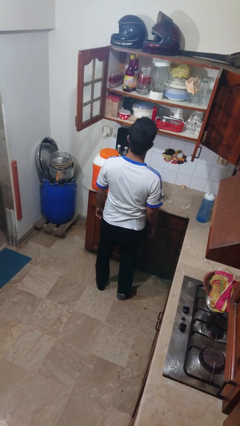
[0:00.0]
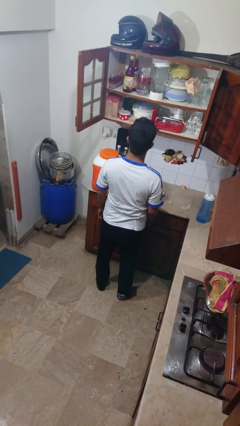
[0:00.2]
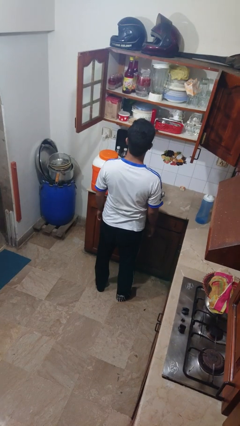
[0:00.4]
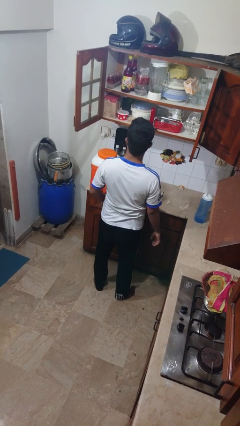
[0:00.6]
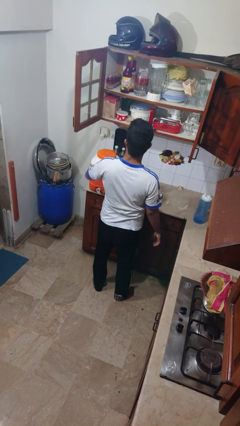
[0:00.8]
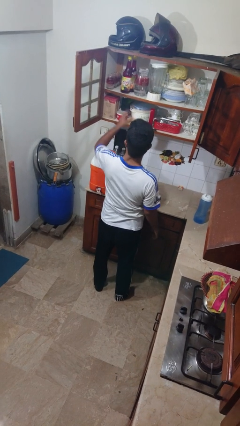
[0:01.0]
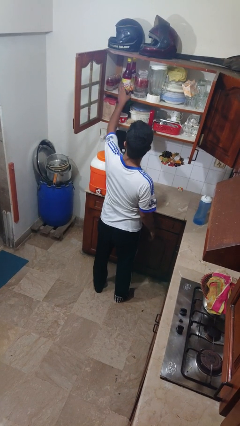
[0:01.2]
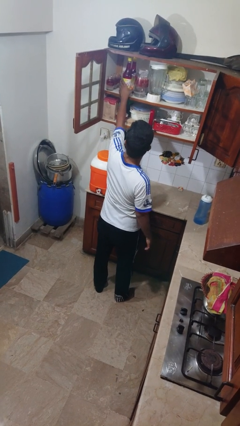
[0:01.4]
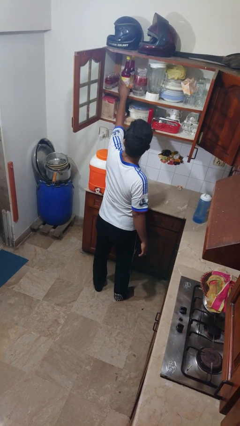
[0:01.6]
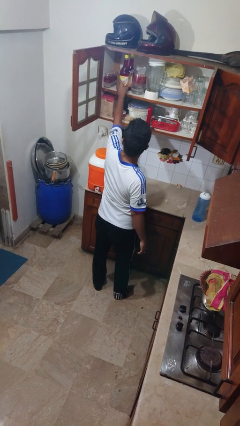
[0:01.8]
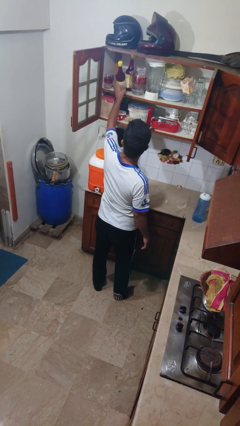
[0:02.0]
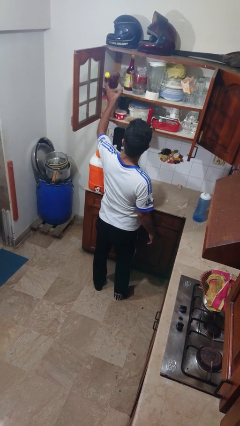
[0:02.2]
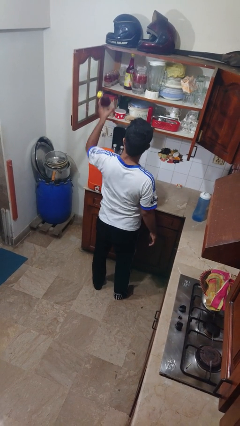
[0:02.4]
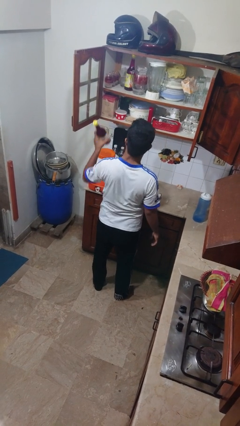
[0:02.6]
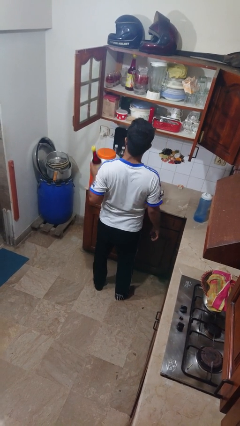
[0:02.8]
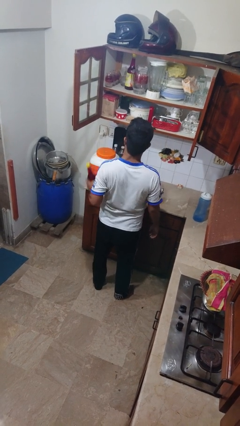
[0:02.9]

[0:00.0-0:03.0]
person picks up object from cabinet

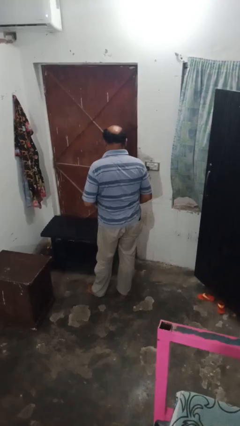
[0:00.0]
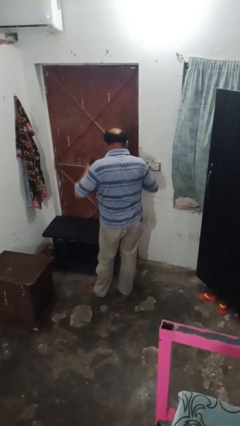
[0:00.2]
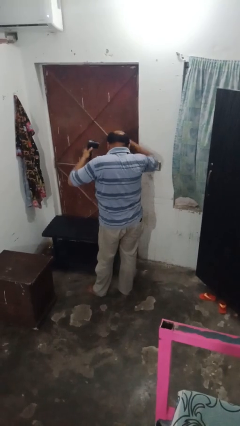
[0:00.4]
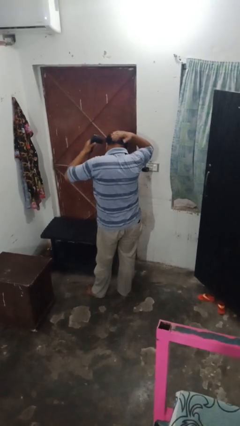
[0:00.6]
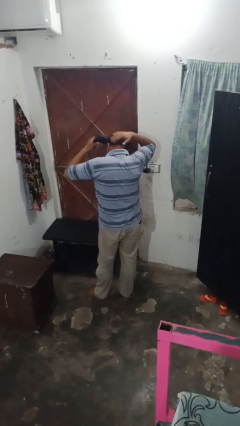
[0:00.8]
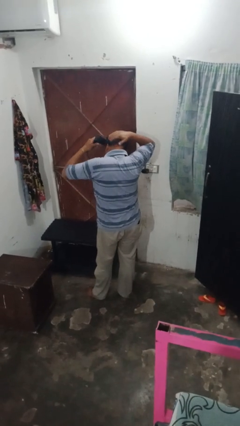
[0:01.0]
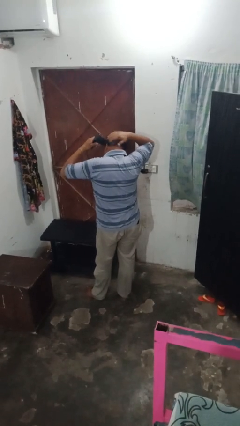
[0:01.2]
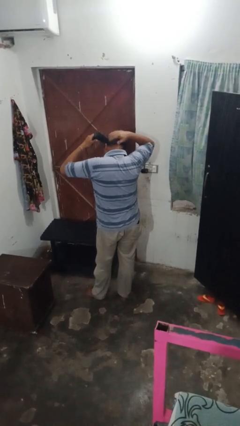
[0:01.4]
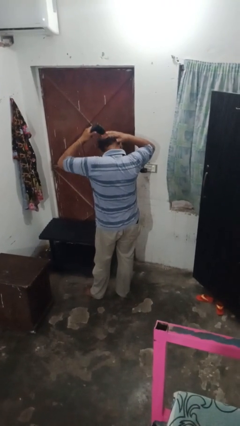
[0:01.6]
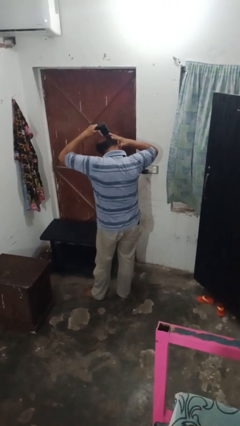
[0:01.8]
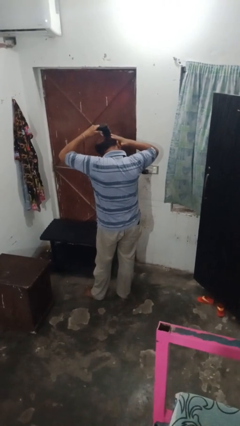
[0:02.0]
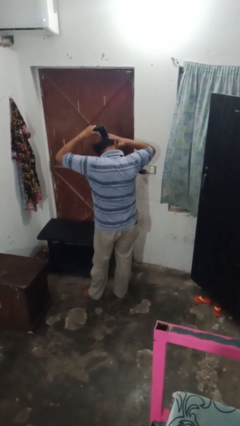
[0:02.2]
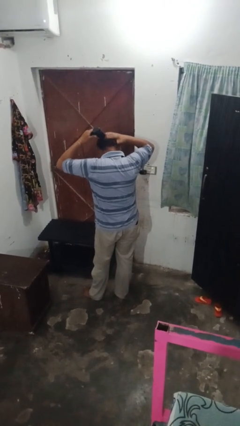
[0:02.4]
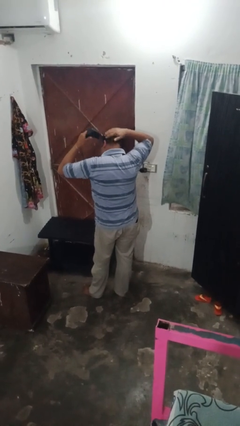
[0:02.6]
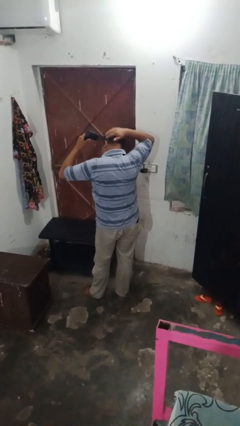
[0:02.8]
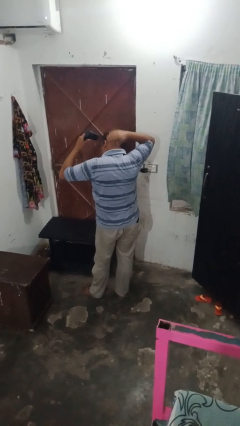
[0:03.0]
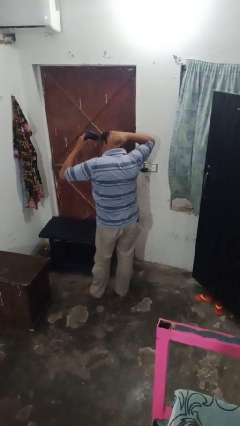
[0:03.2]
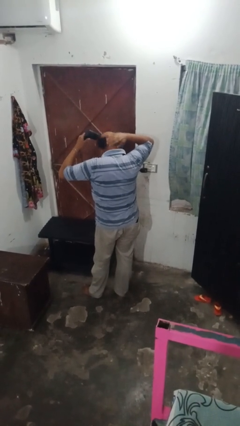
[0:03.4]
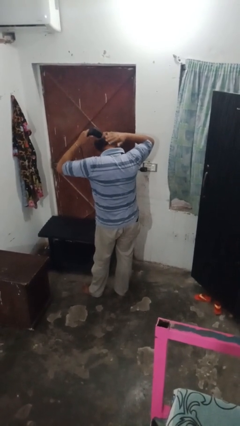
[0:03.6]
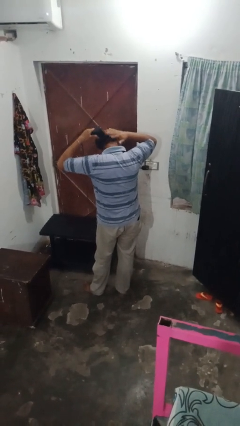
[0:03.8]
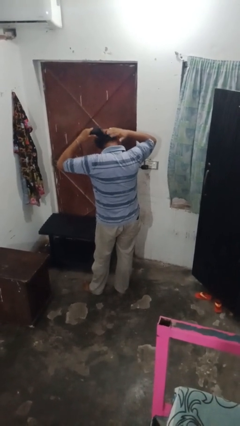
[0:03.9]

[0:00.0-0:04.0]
person dries hair with hairdryer

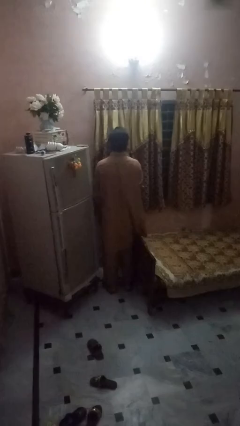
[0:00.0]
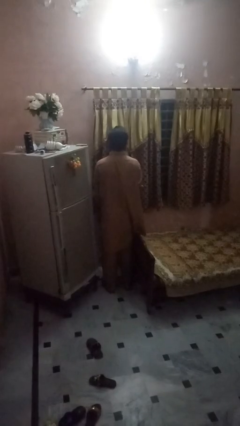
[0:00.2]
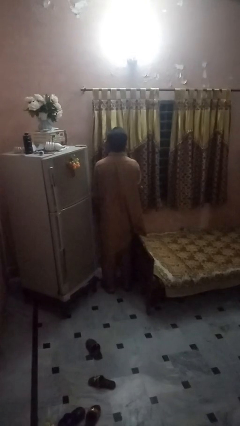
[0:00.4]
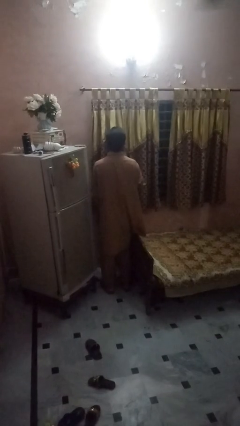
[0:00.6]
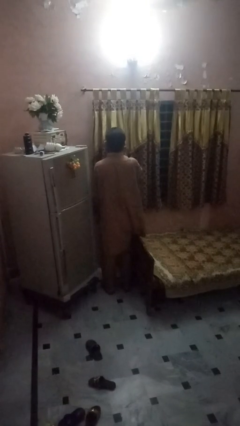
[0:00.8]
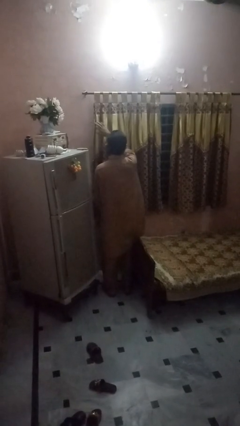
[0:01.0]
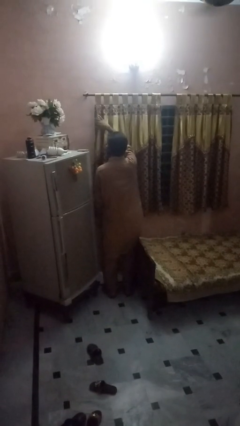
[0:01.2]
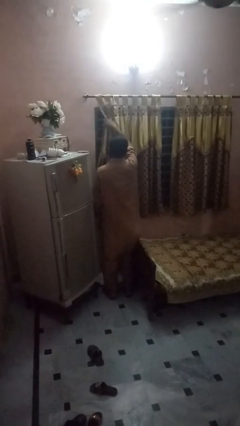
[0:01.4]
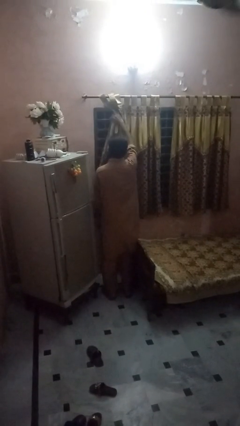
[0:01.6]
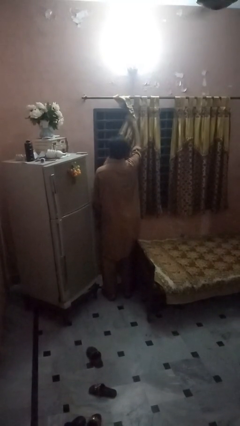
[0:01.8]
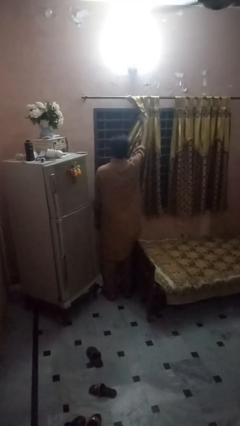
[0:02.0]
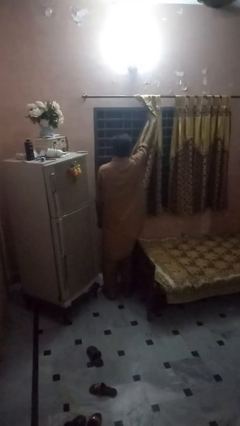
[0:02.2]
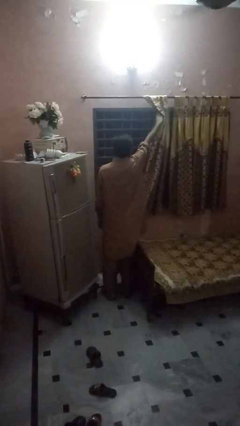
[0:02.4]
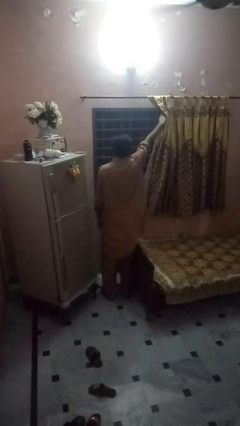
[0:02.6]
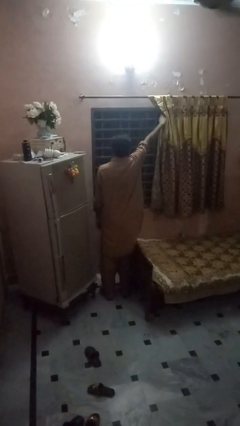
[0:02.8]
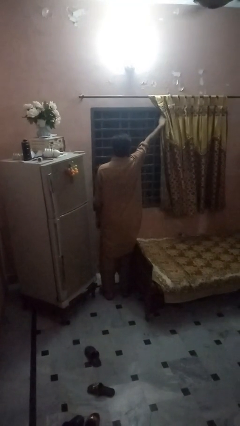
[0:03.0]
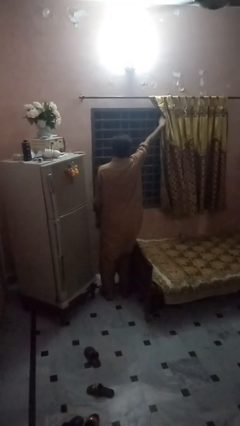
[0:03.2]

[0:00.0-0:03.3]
person opens curtains

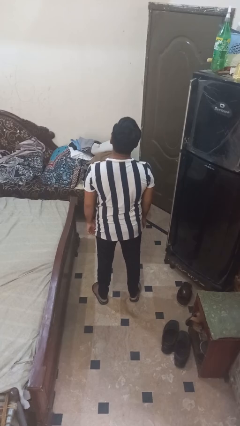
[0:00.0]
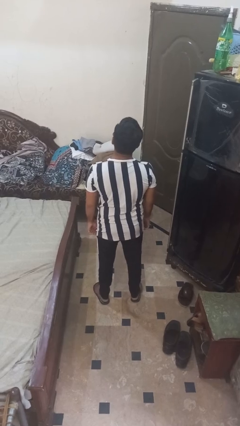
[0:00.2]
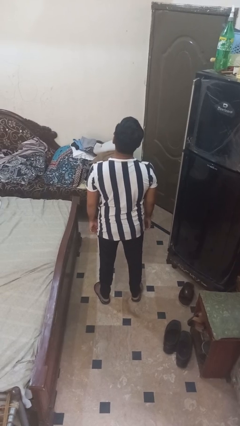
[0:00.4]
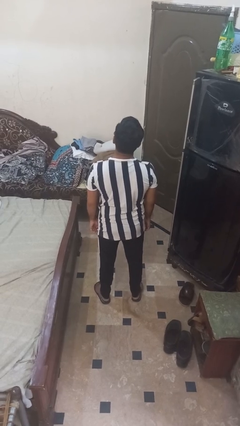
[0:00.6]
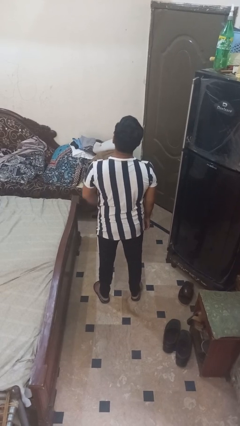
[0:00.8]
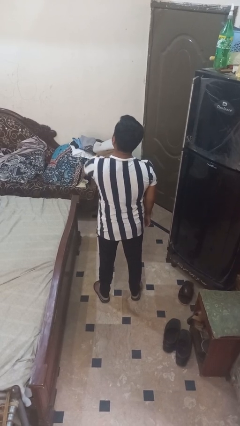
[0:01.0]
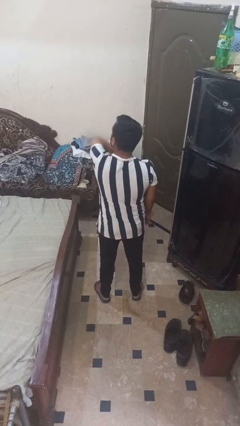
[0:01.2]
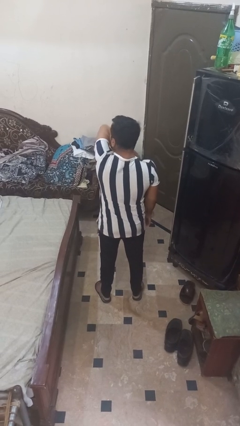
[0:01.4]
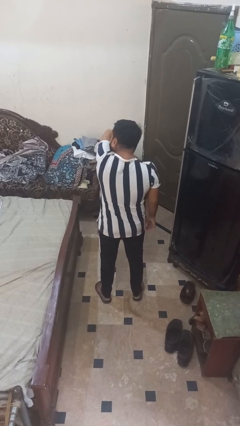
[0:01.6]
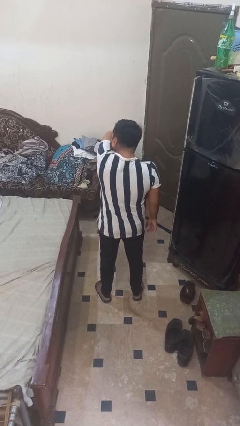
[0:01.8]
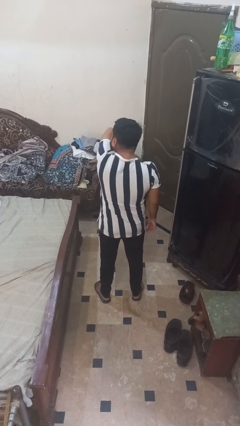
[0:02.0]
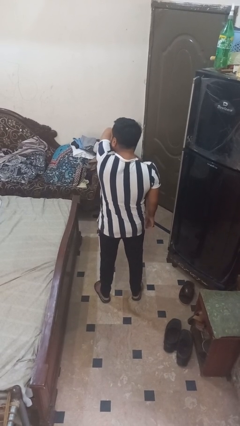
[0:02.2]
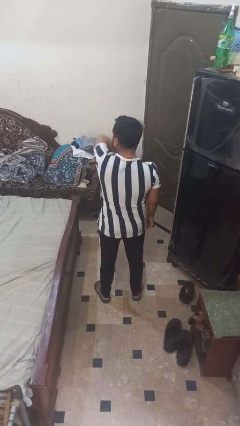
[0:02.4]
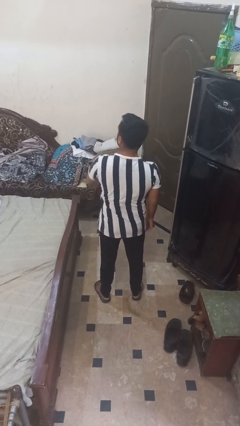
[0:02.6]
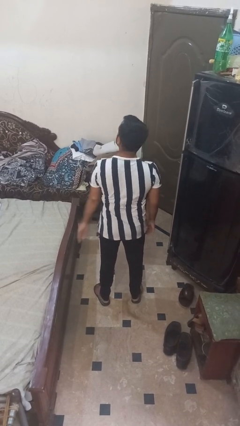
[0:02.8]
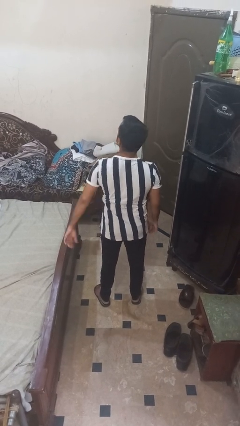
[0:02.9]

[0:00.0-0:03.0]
person sneezes into arm

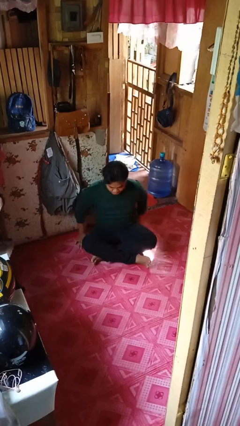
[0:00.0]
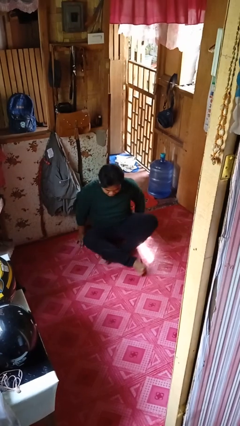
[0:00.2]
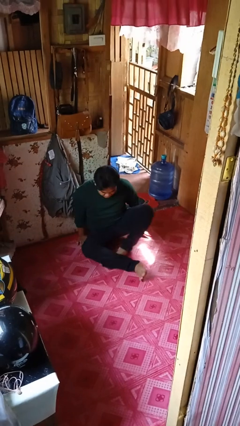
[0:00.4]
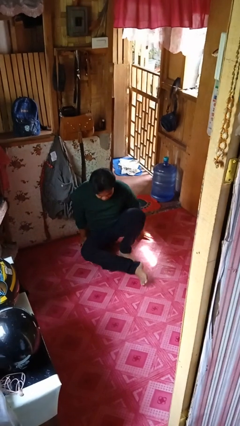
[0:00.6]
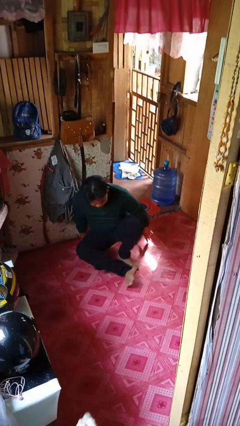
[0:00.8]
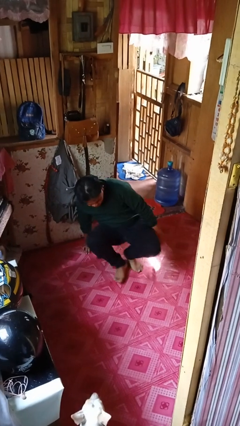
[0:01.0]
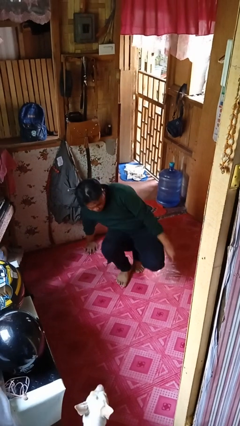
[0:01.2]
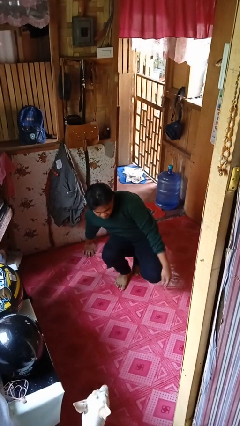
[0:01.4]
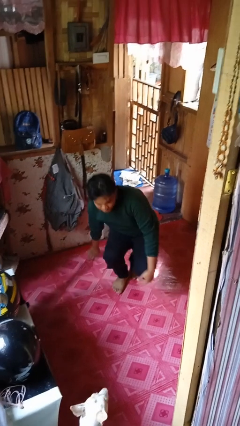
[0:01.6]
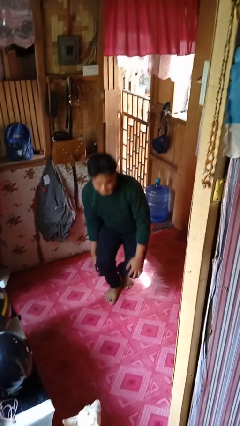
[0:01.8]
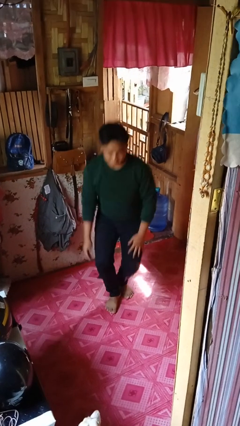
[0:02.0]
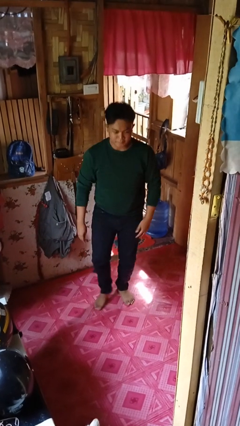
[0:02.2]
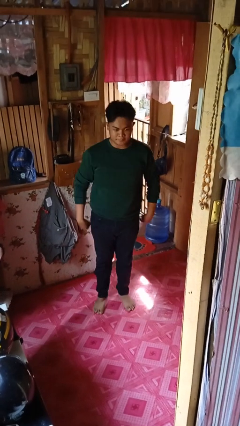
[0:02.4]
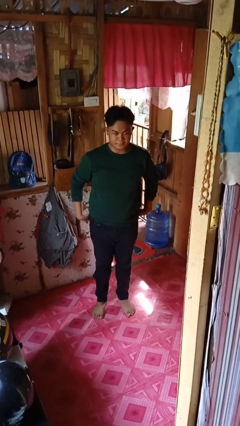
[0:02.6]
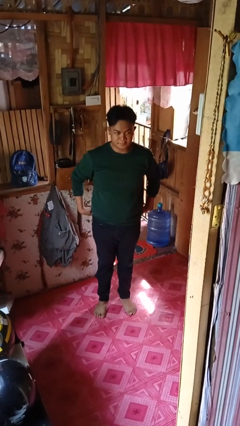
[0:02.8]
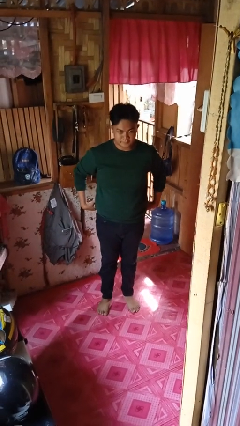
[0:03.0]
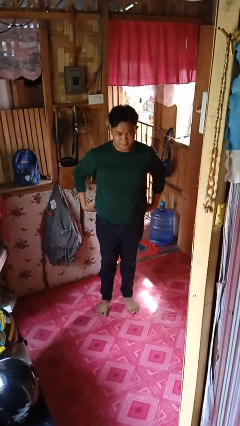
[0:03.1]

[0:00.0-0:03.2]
person stands up from floor

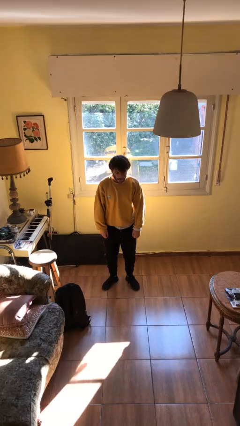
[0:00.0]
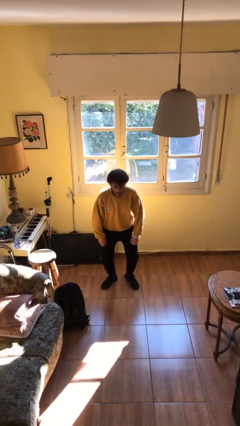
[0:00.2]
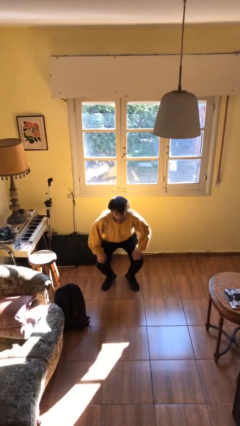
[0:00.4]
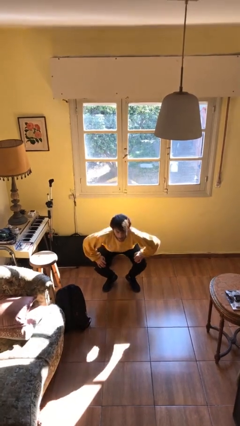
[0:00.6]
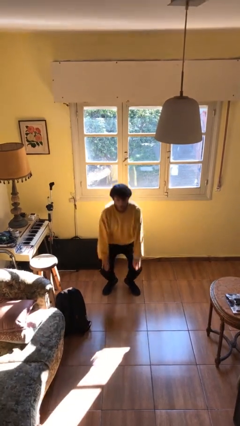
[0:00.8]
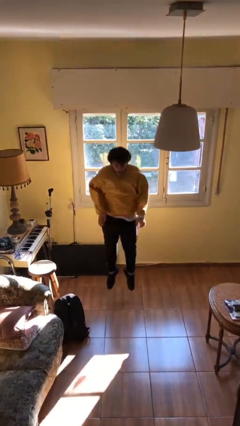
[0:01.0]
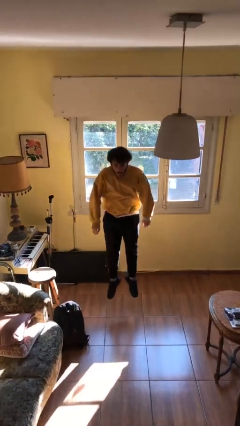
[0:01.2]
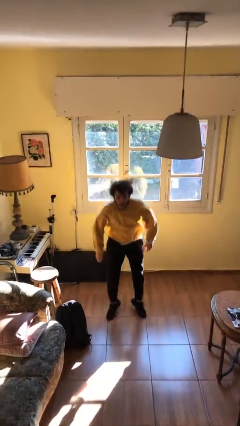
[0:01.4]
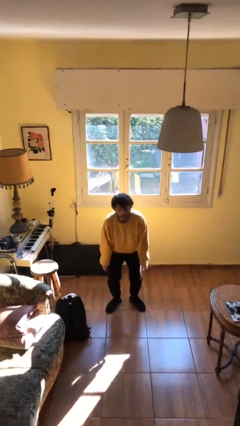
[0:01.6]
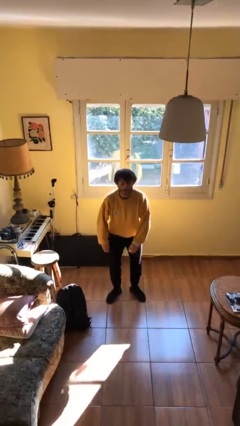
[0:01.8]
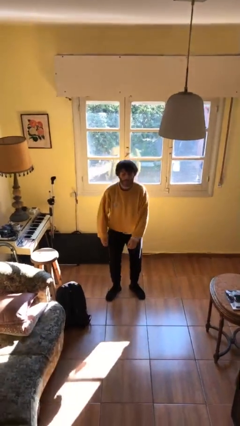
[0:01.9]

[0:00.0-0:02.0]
person jumps
